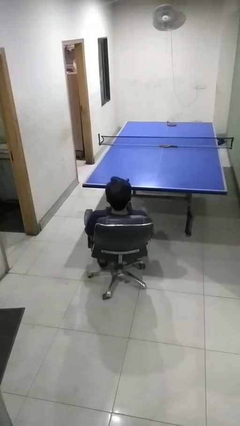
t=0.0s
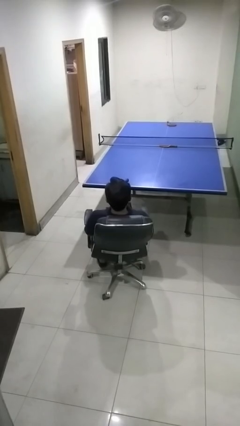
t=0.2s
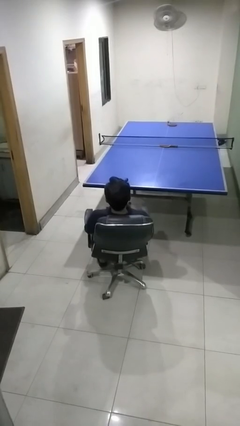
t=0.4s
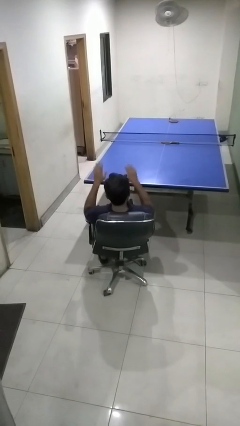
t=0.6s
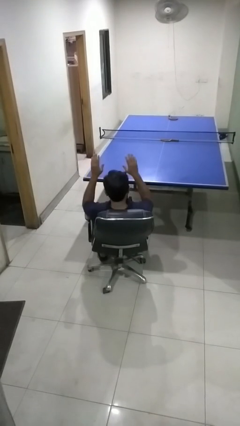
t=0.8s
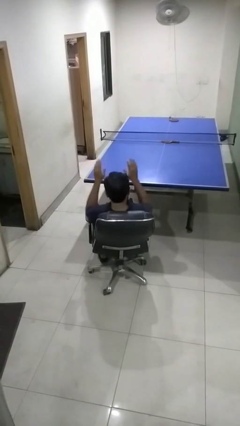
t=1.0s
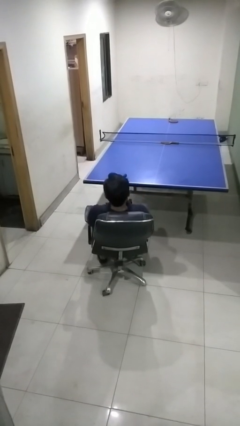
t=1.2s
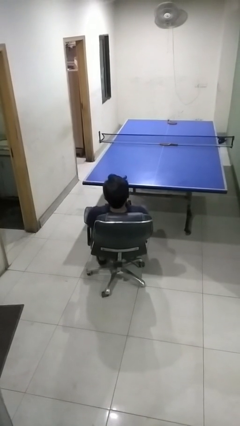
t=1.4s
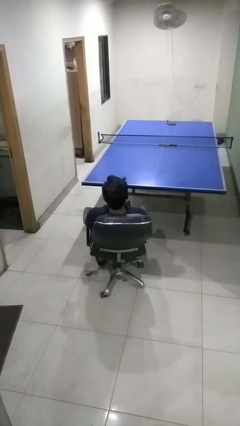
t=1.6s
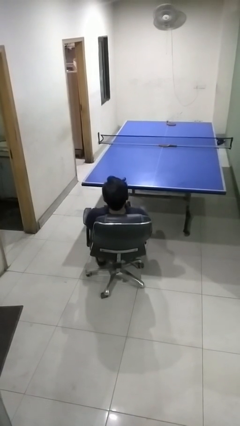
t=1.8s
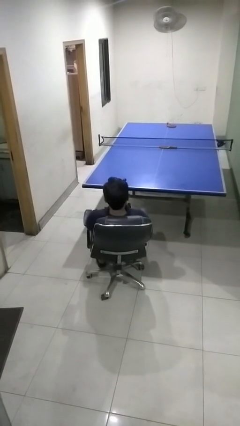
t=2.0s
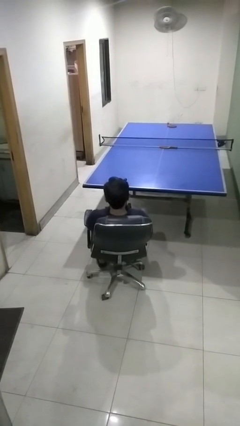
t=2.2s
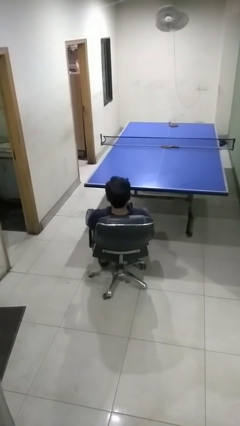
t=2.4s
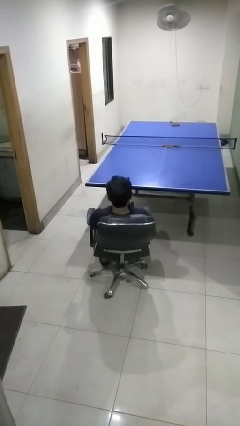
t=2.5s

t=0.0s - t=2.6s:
person slaps hands on thighs

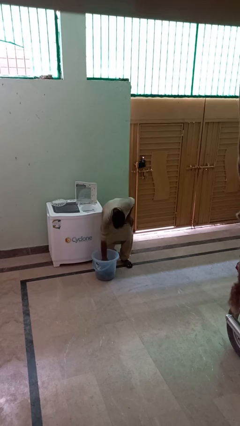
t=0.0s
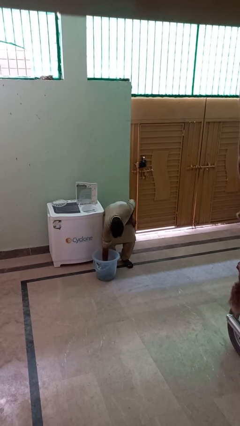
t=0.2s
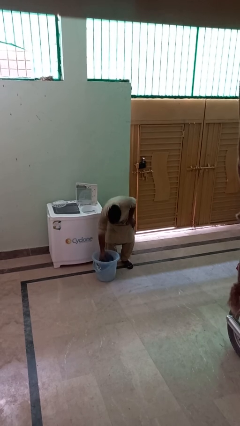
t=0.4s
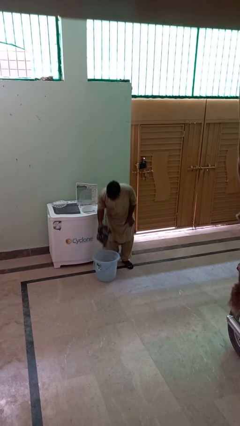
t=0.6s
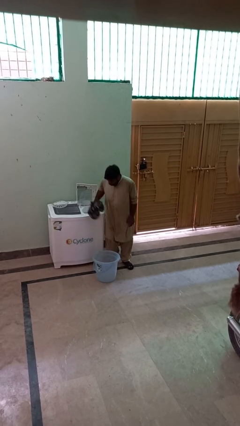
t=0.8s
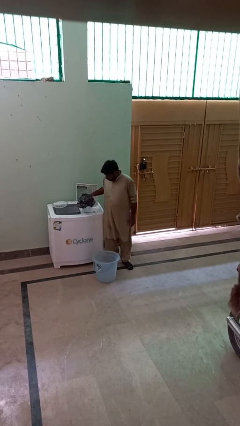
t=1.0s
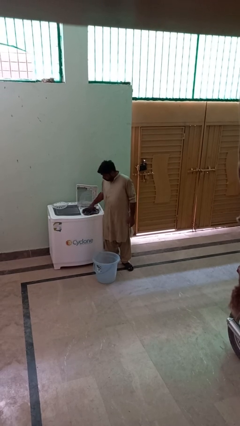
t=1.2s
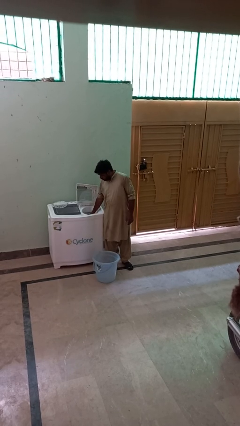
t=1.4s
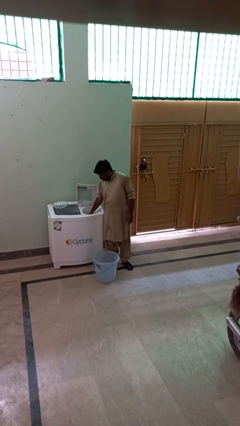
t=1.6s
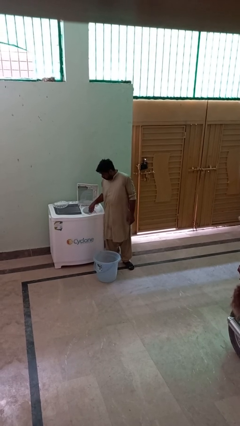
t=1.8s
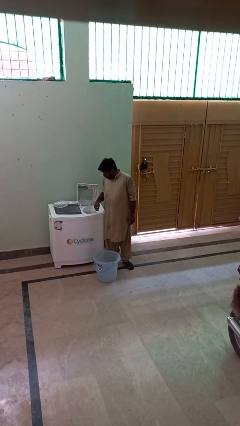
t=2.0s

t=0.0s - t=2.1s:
person loads dryer

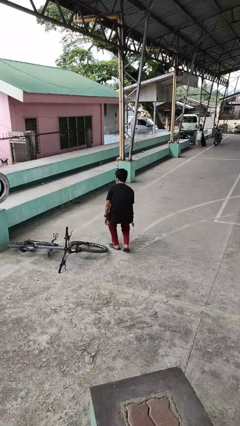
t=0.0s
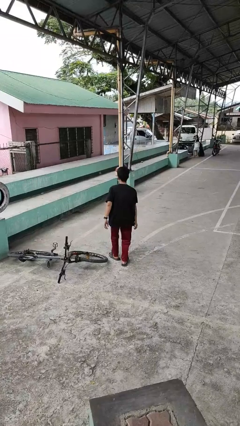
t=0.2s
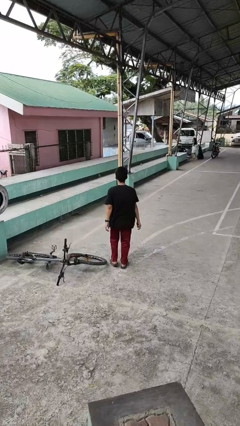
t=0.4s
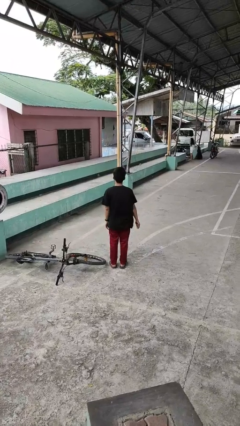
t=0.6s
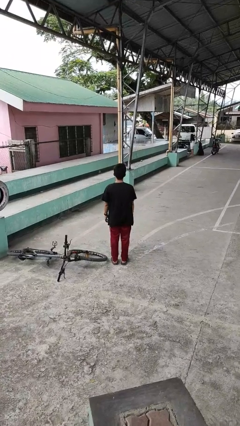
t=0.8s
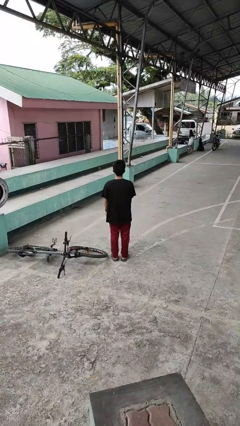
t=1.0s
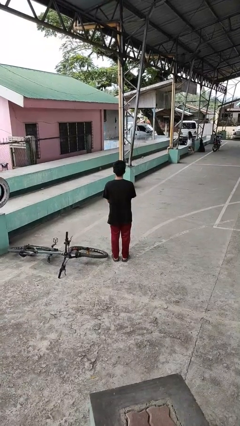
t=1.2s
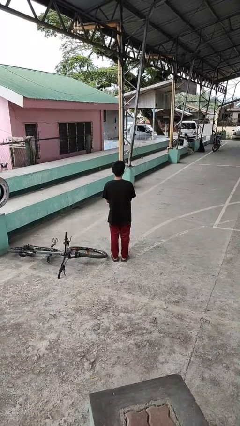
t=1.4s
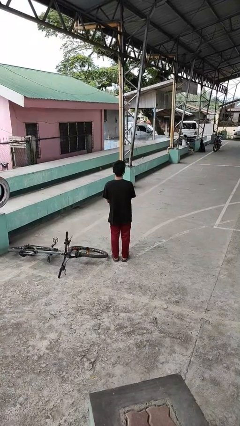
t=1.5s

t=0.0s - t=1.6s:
person stands up from floor

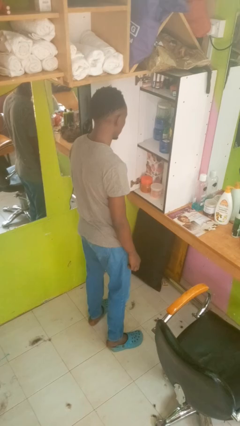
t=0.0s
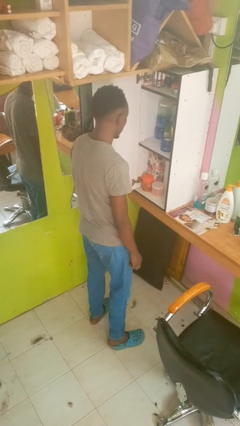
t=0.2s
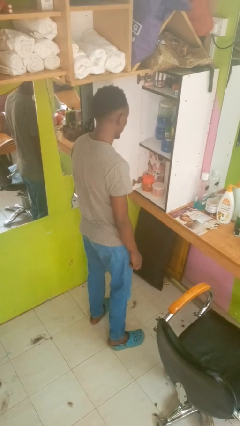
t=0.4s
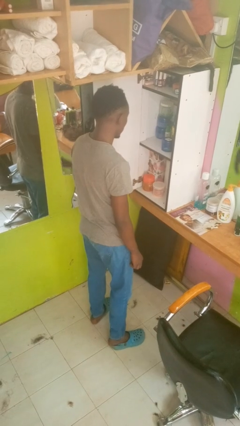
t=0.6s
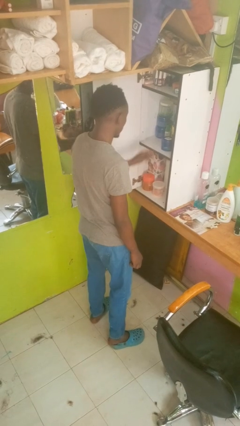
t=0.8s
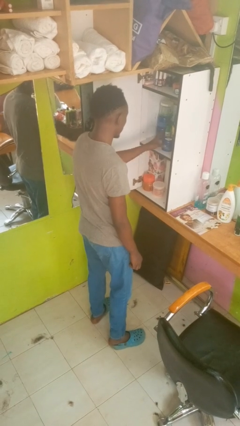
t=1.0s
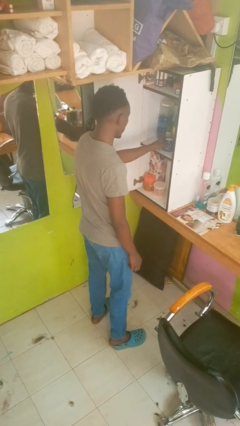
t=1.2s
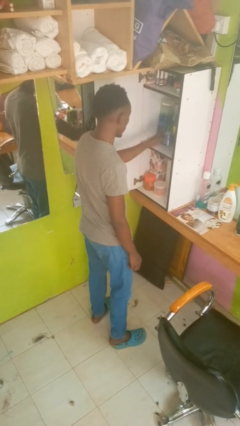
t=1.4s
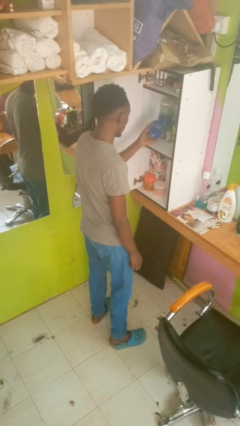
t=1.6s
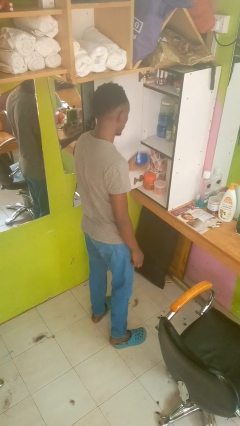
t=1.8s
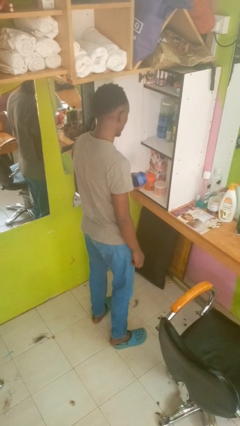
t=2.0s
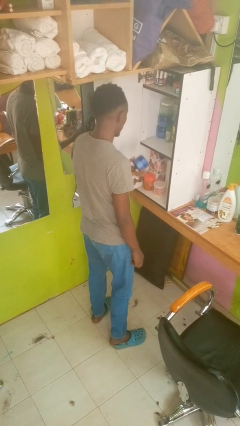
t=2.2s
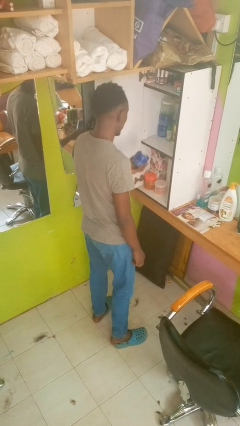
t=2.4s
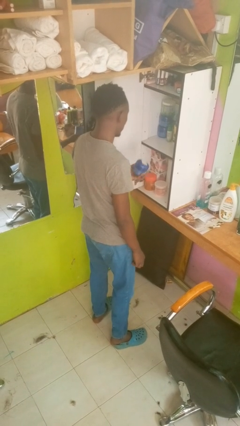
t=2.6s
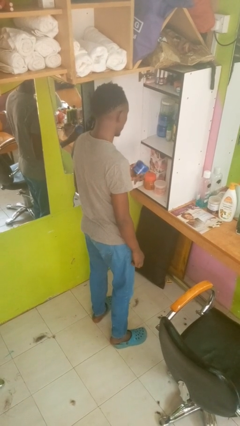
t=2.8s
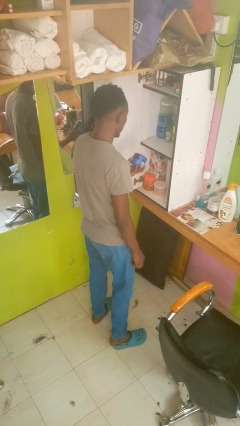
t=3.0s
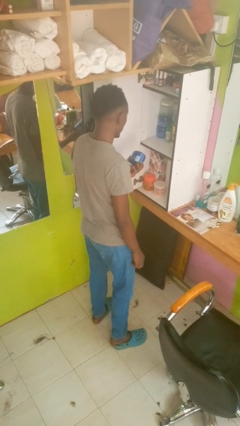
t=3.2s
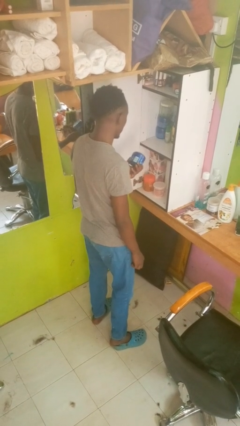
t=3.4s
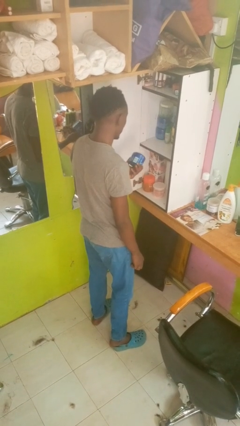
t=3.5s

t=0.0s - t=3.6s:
person picks up object from cabinet

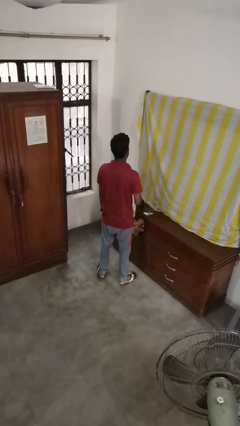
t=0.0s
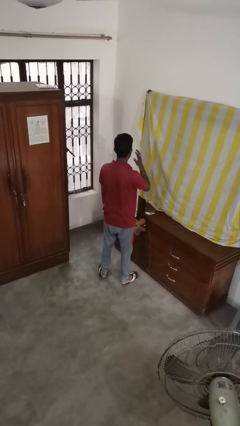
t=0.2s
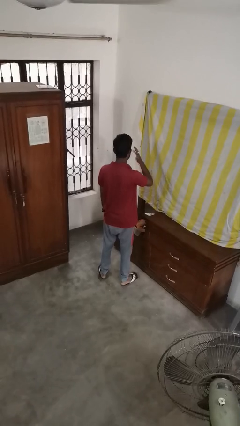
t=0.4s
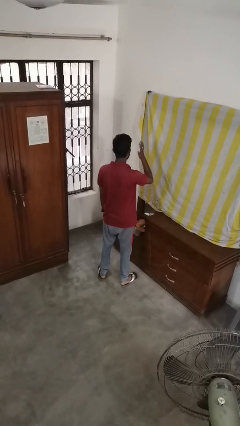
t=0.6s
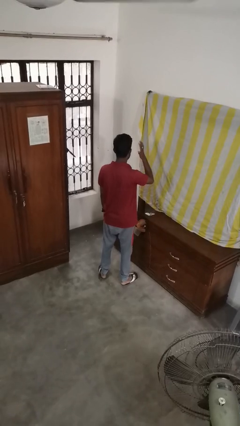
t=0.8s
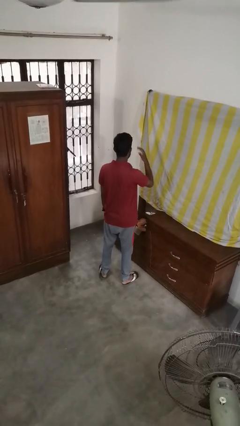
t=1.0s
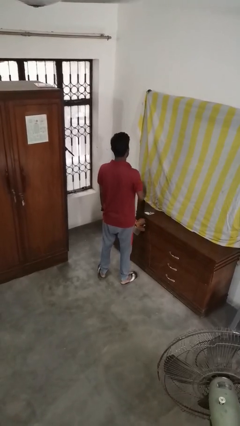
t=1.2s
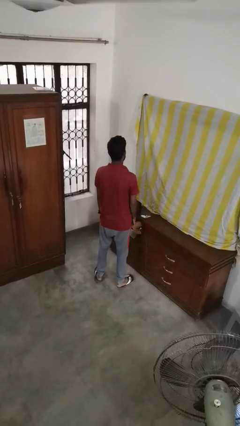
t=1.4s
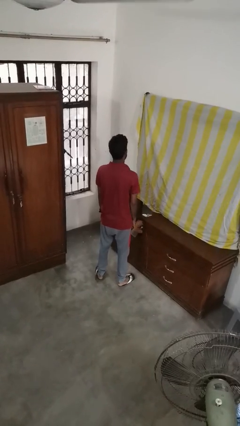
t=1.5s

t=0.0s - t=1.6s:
person puts fingers in ear

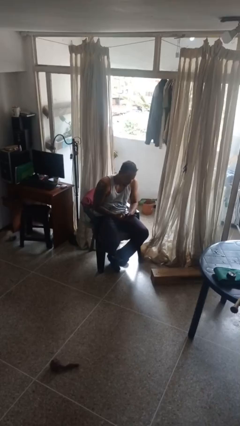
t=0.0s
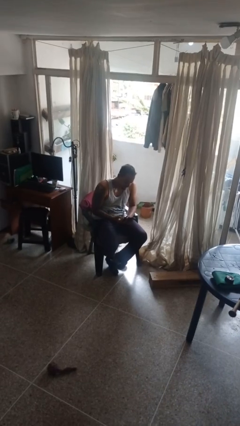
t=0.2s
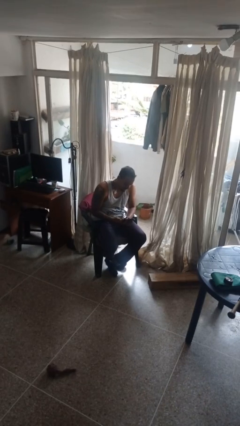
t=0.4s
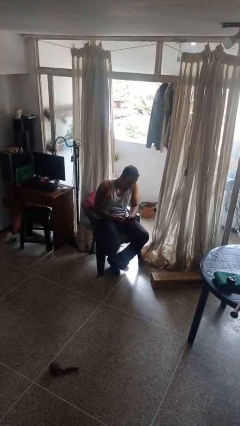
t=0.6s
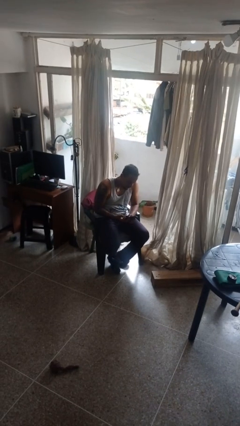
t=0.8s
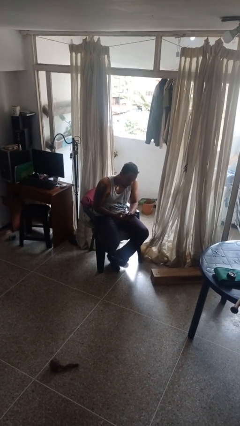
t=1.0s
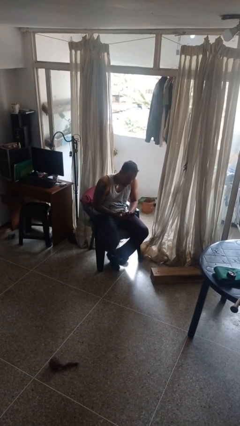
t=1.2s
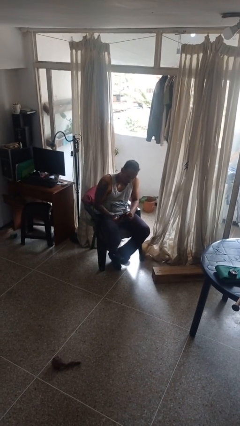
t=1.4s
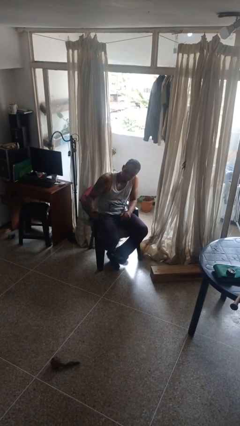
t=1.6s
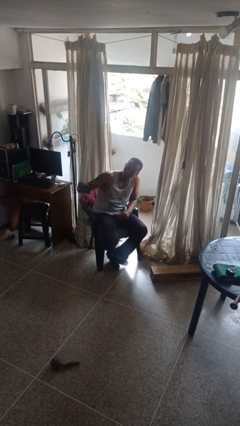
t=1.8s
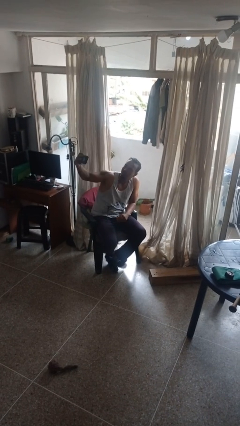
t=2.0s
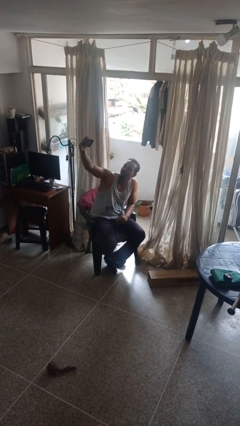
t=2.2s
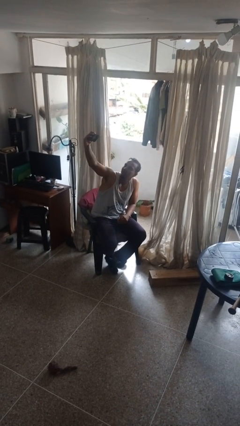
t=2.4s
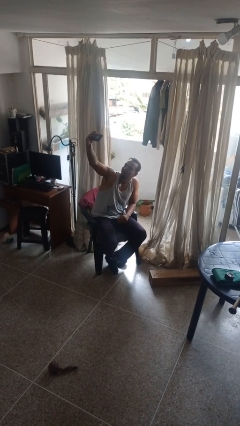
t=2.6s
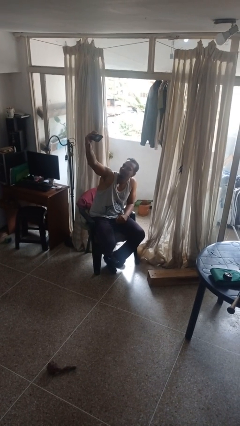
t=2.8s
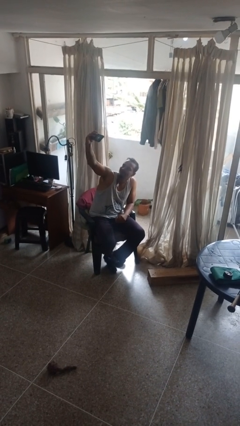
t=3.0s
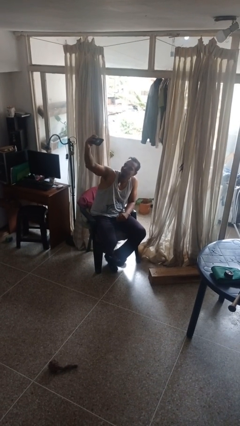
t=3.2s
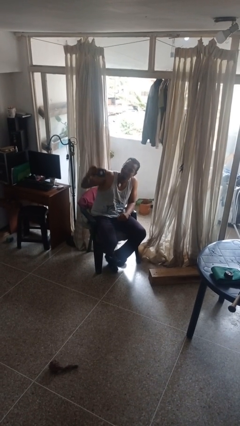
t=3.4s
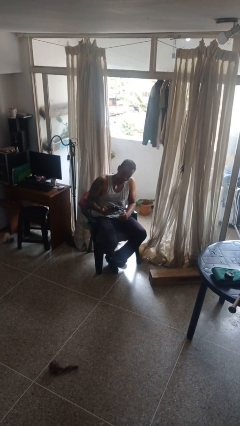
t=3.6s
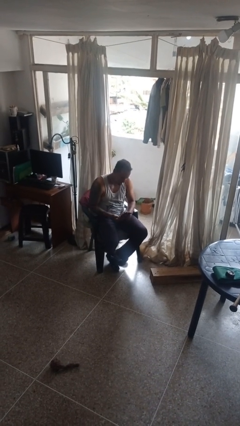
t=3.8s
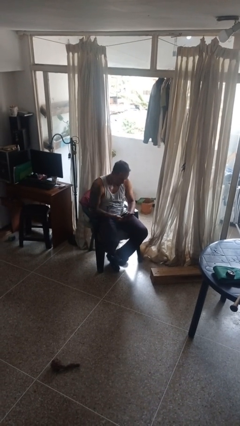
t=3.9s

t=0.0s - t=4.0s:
person takes selfie

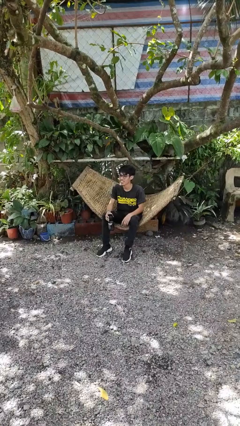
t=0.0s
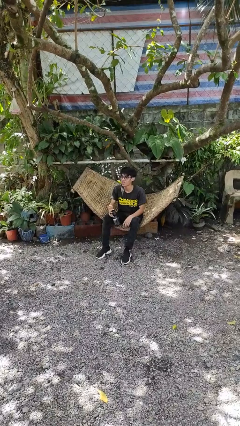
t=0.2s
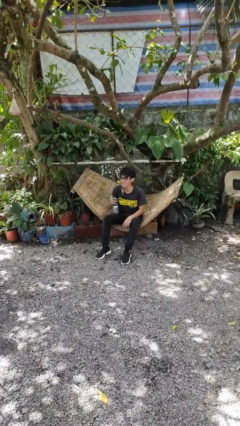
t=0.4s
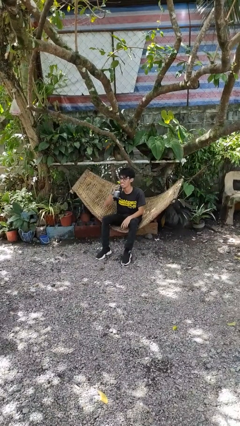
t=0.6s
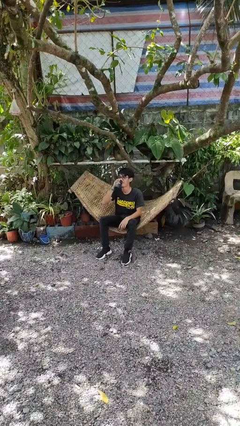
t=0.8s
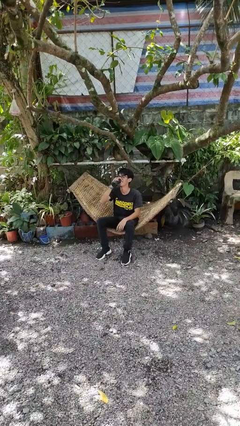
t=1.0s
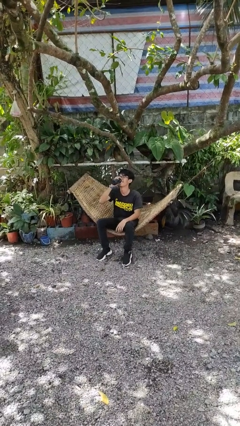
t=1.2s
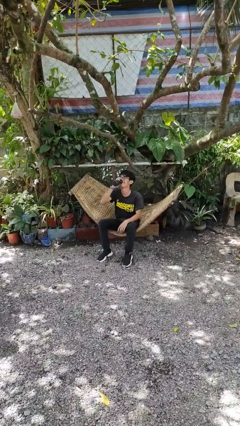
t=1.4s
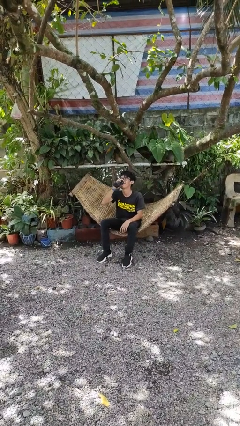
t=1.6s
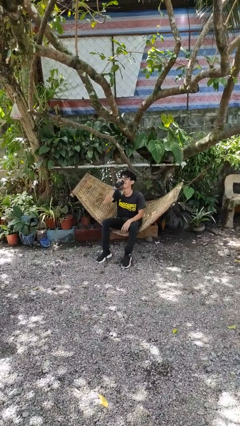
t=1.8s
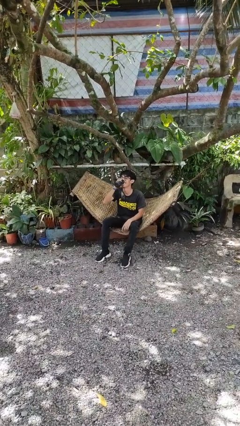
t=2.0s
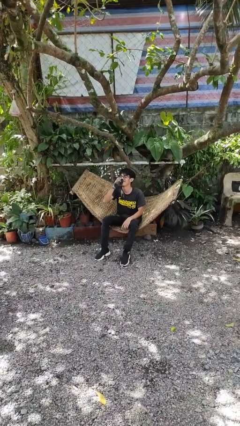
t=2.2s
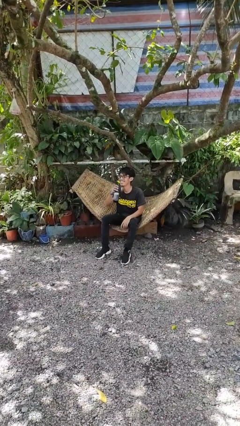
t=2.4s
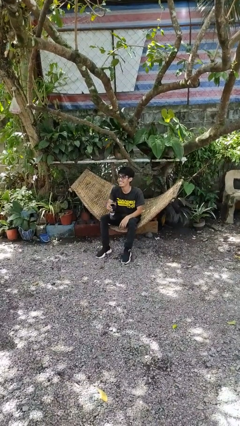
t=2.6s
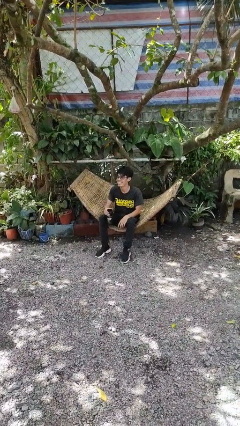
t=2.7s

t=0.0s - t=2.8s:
person drinks from bottle
